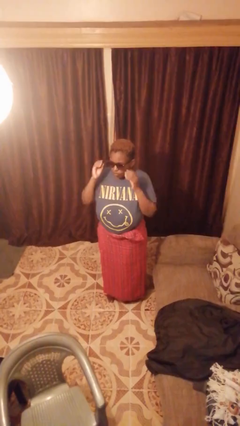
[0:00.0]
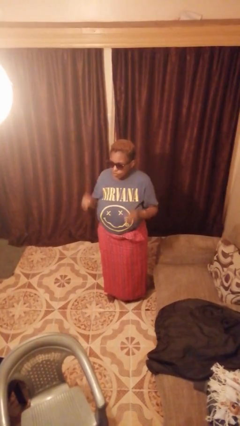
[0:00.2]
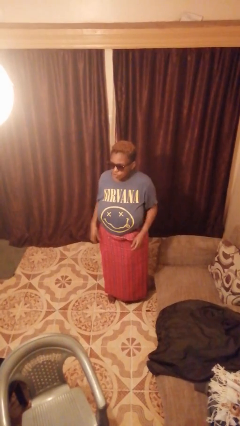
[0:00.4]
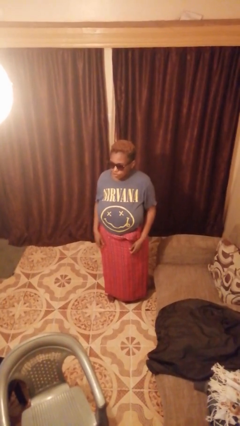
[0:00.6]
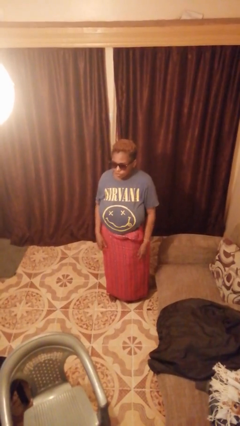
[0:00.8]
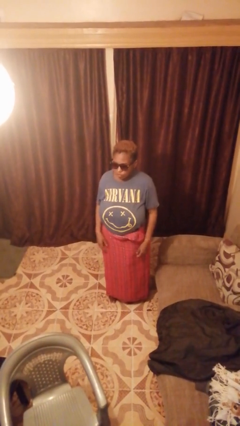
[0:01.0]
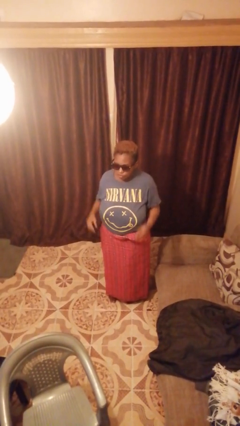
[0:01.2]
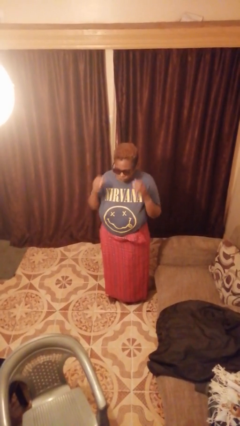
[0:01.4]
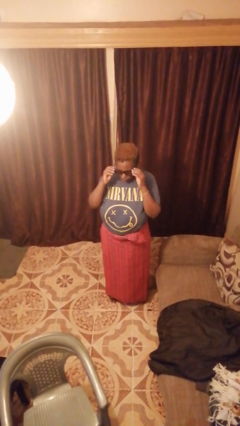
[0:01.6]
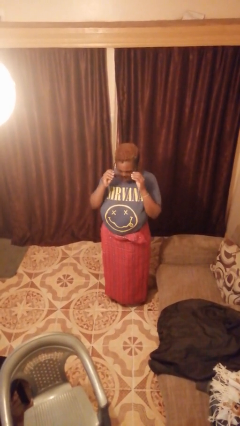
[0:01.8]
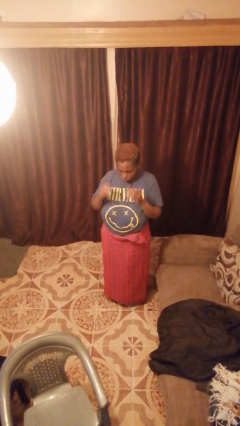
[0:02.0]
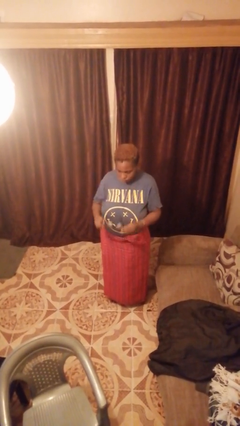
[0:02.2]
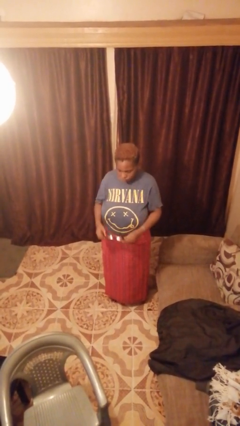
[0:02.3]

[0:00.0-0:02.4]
person takes off sunglasses

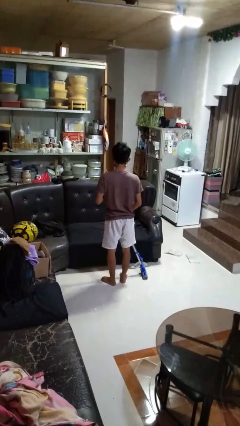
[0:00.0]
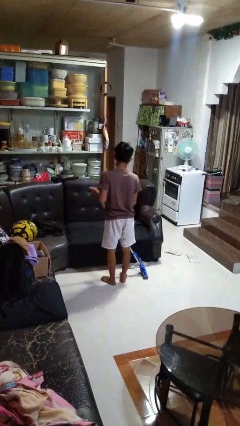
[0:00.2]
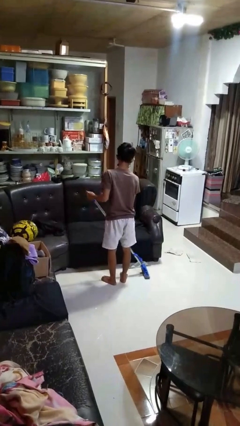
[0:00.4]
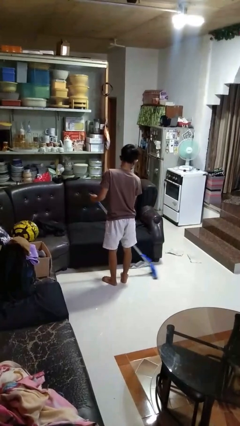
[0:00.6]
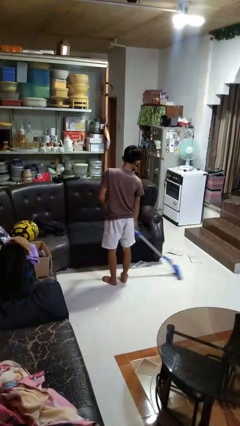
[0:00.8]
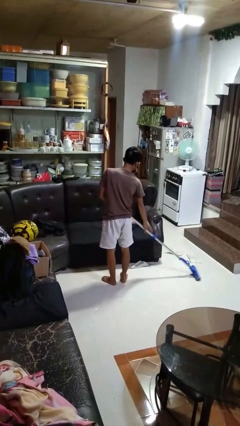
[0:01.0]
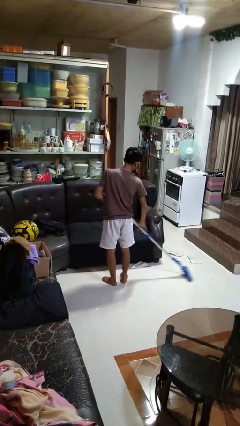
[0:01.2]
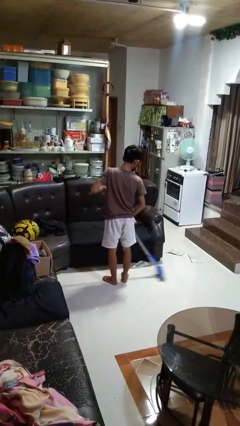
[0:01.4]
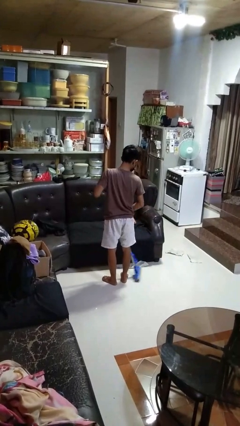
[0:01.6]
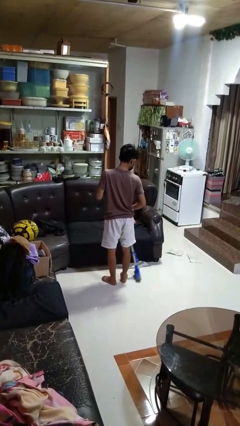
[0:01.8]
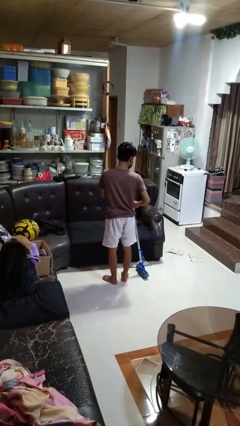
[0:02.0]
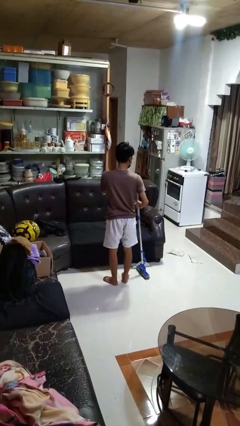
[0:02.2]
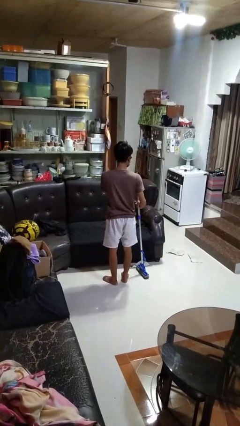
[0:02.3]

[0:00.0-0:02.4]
person mops

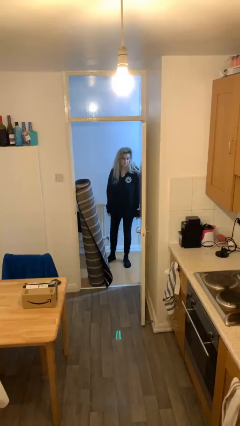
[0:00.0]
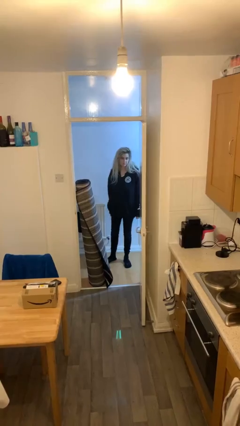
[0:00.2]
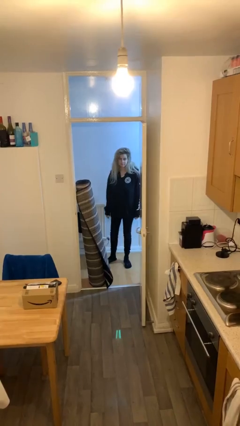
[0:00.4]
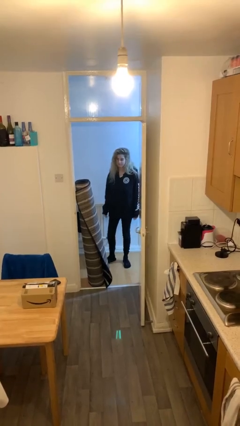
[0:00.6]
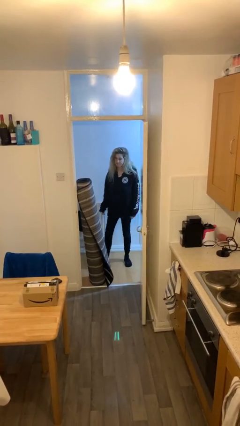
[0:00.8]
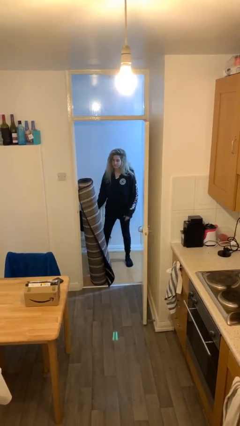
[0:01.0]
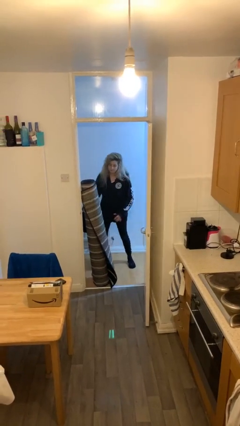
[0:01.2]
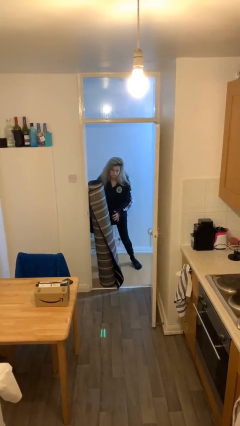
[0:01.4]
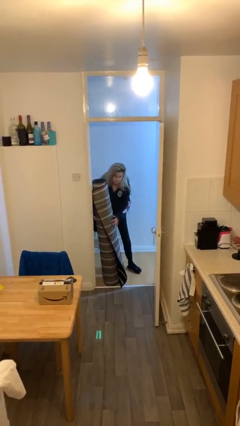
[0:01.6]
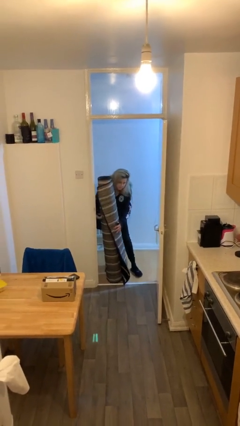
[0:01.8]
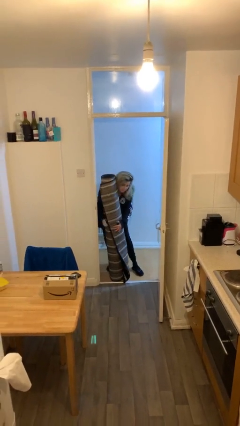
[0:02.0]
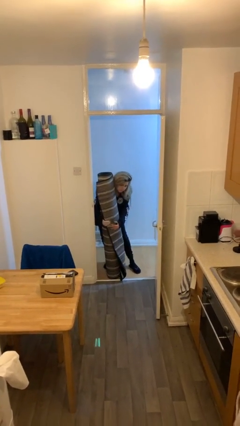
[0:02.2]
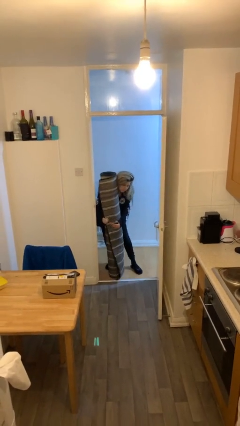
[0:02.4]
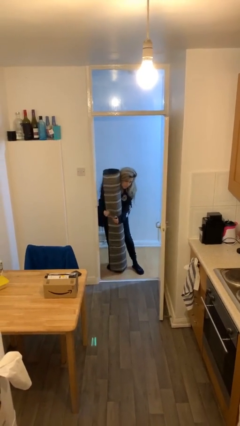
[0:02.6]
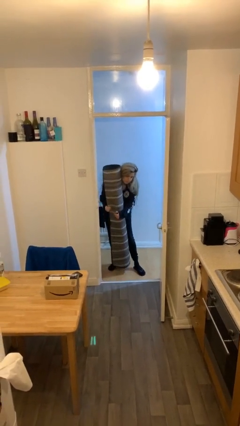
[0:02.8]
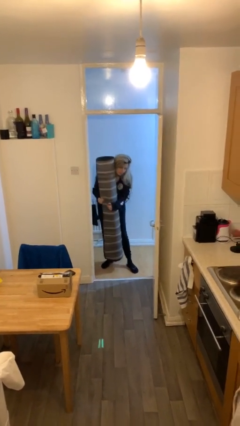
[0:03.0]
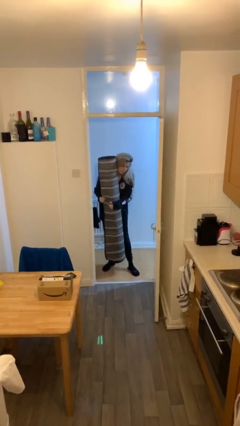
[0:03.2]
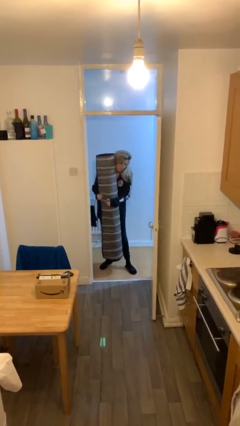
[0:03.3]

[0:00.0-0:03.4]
person picks up object from floor

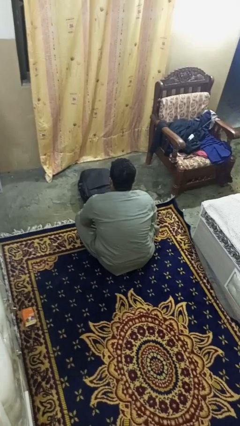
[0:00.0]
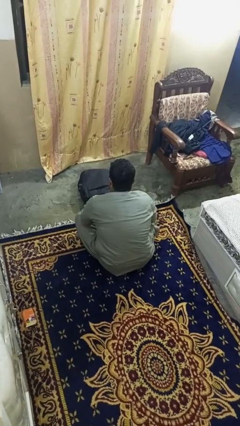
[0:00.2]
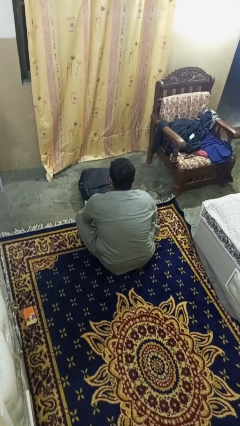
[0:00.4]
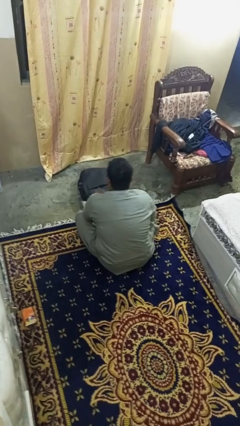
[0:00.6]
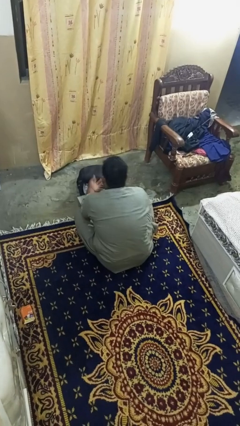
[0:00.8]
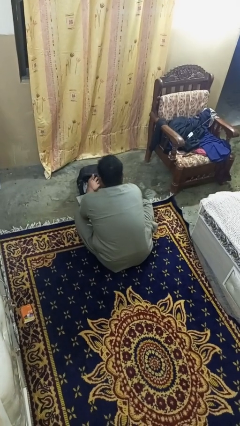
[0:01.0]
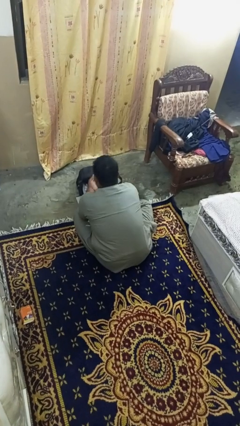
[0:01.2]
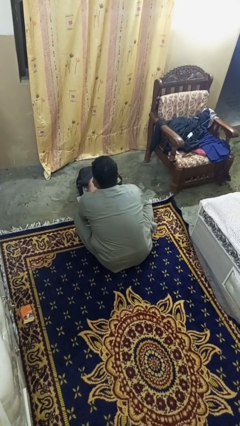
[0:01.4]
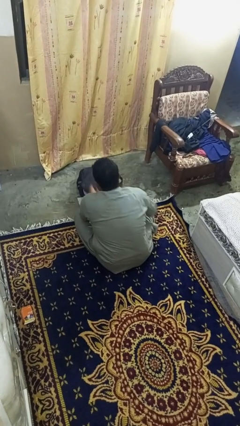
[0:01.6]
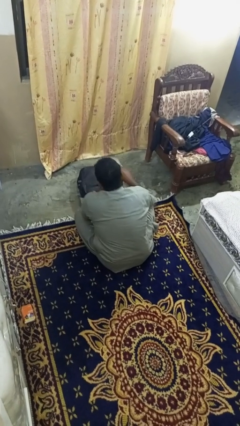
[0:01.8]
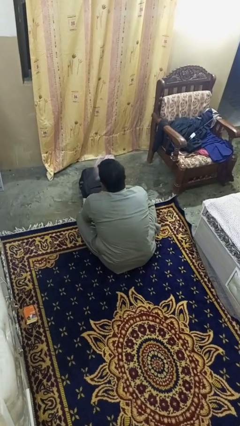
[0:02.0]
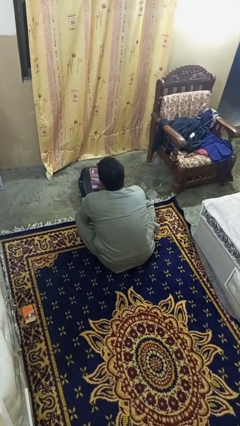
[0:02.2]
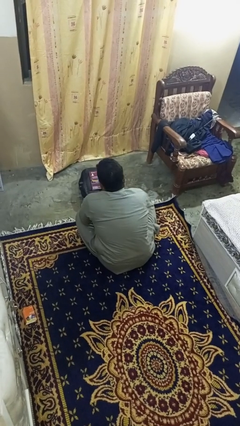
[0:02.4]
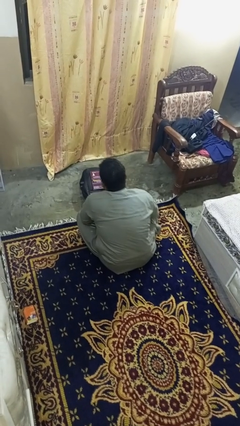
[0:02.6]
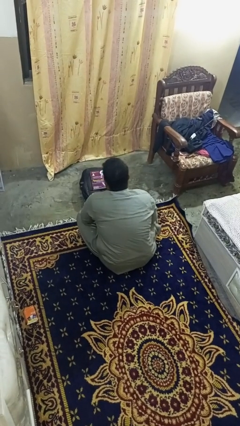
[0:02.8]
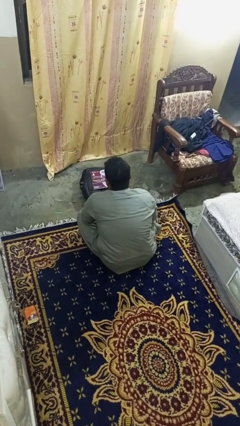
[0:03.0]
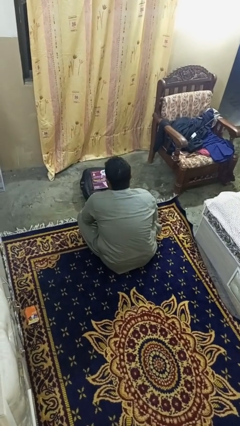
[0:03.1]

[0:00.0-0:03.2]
person takes object from bag

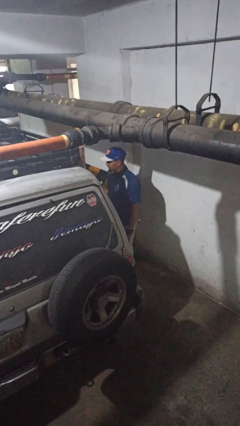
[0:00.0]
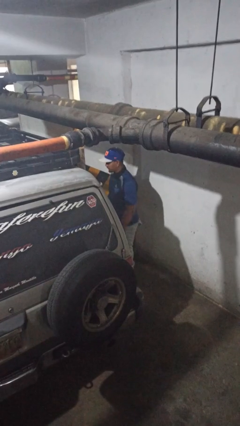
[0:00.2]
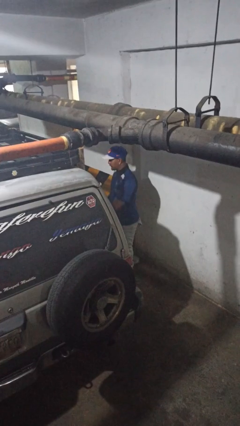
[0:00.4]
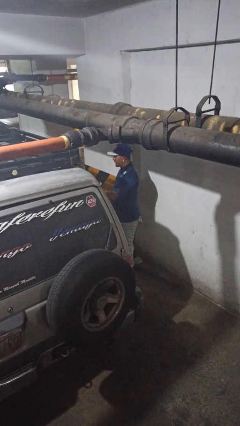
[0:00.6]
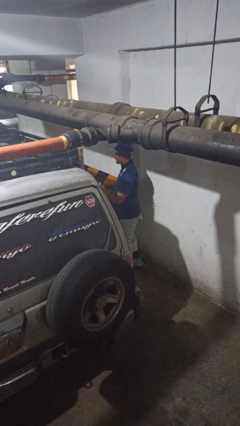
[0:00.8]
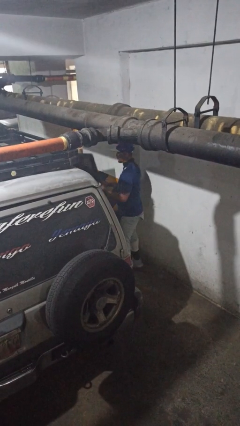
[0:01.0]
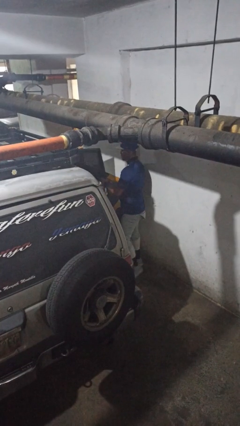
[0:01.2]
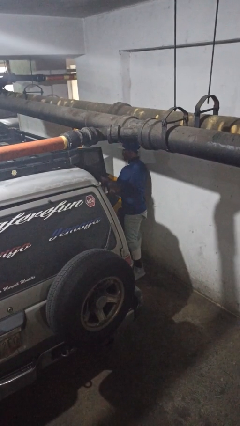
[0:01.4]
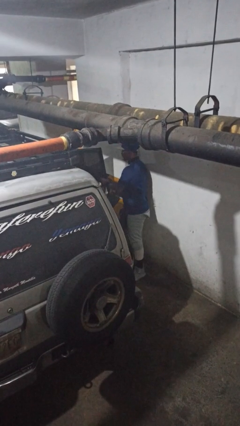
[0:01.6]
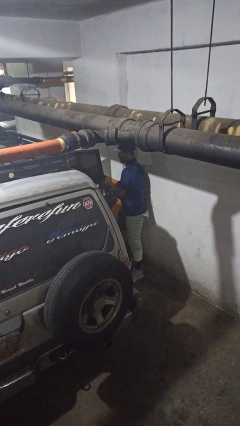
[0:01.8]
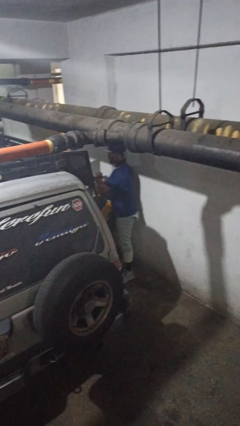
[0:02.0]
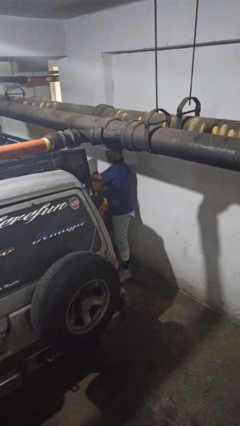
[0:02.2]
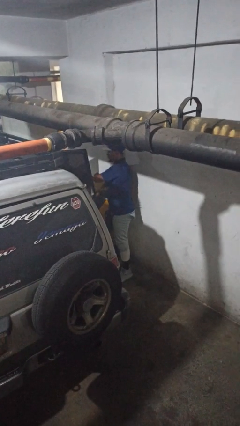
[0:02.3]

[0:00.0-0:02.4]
person opens car door

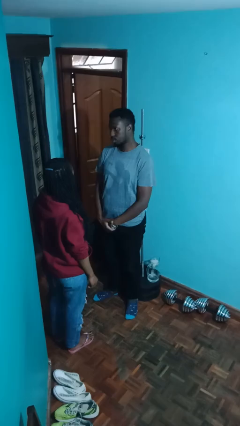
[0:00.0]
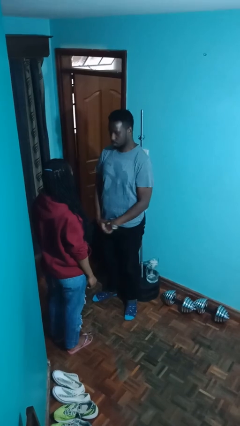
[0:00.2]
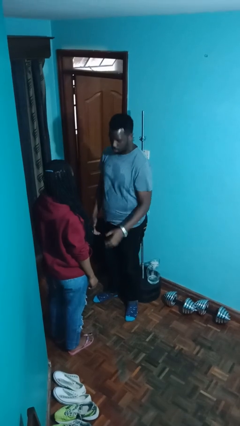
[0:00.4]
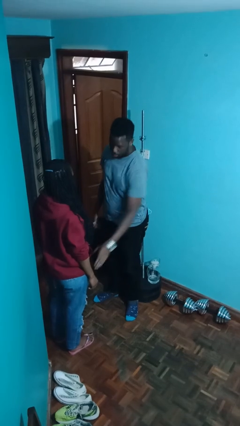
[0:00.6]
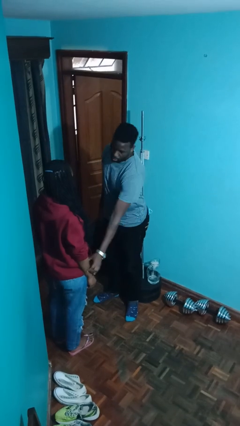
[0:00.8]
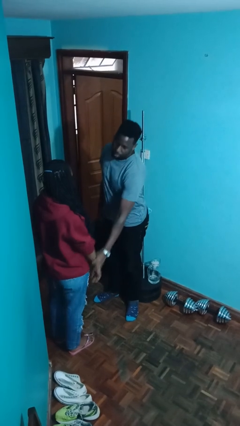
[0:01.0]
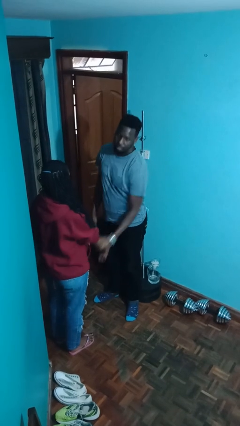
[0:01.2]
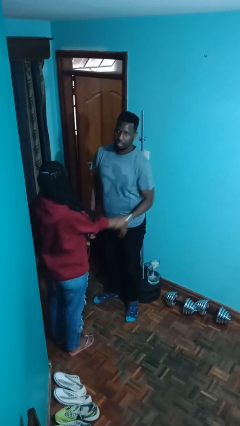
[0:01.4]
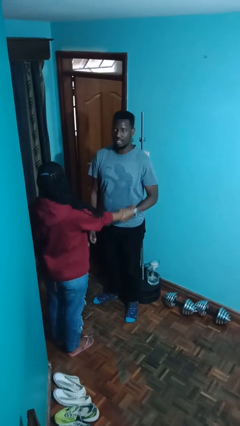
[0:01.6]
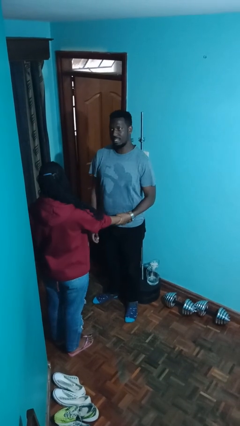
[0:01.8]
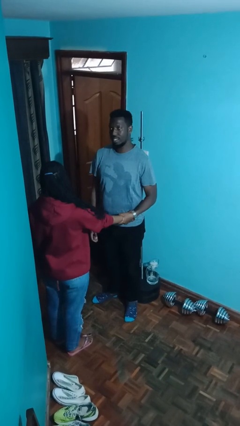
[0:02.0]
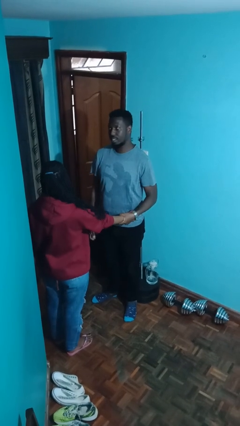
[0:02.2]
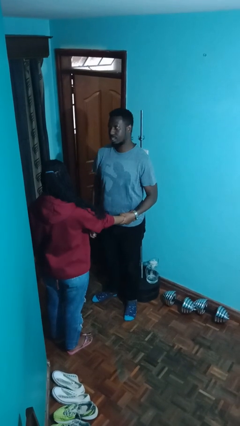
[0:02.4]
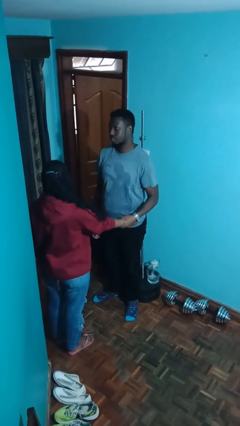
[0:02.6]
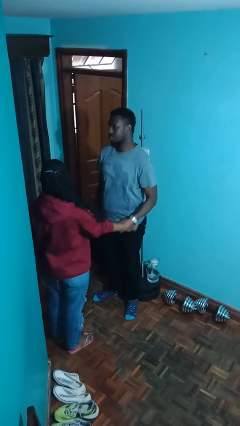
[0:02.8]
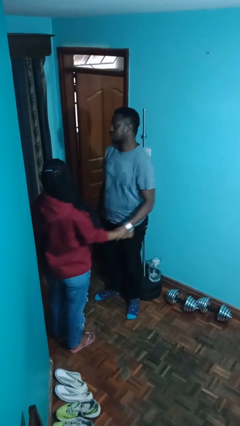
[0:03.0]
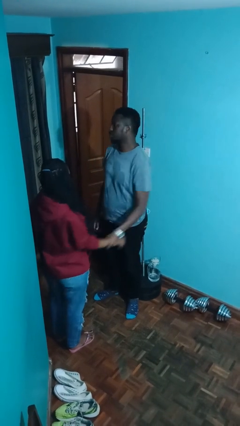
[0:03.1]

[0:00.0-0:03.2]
person grabs person by forearm
